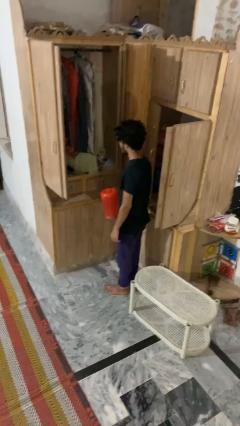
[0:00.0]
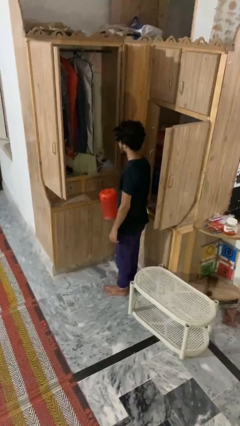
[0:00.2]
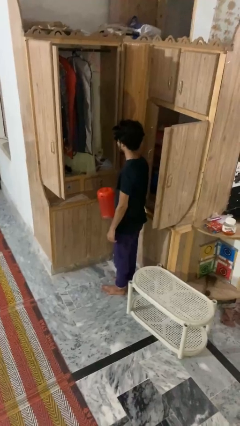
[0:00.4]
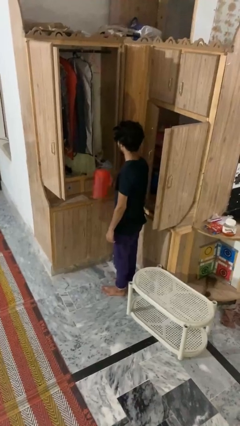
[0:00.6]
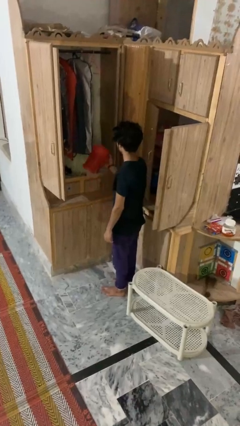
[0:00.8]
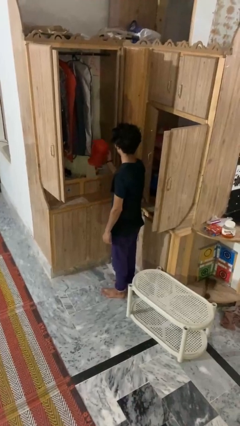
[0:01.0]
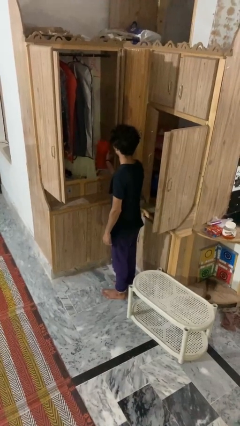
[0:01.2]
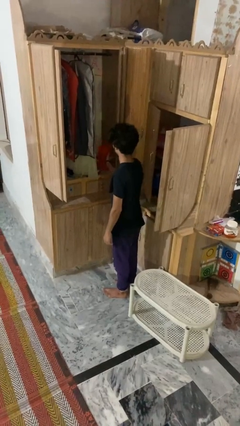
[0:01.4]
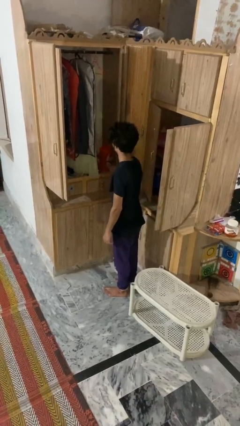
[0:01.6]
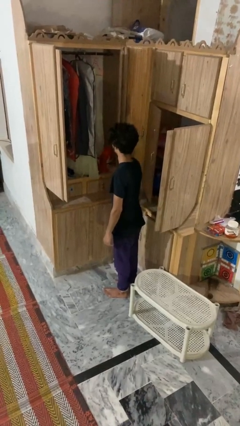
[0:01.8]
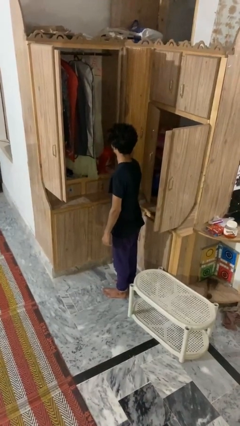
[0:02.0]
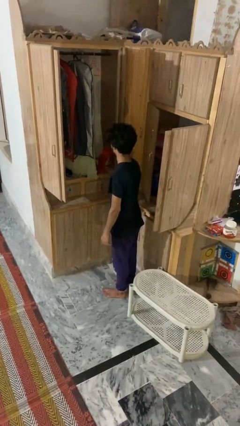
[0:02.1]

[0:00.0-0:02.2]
person puts down object into cabinet

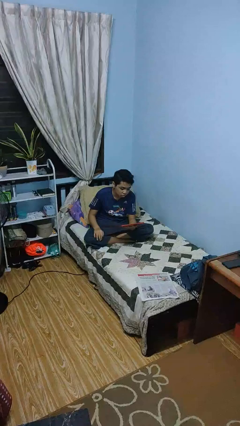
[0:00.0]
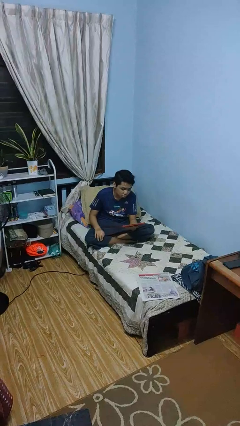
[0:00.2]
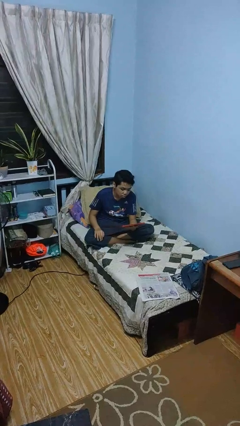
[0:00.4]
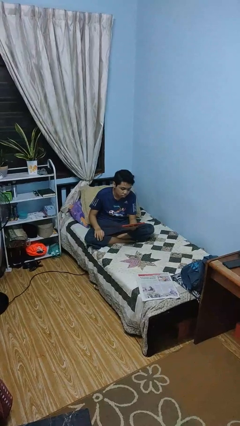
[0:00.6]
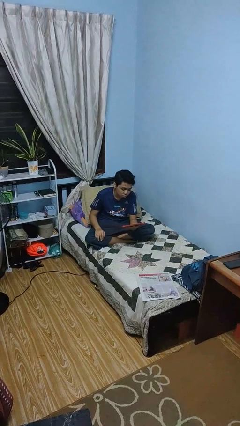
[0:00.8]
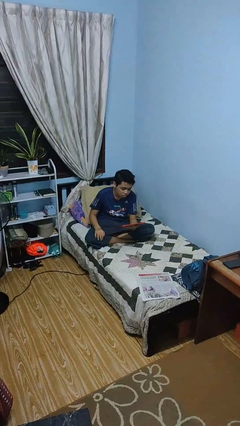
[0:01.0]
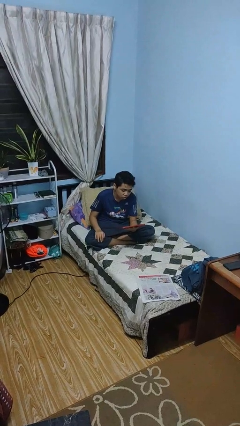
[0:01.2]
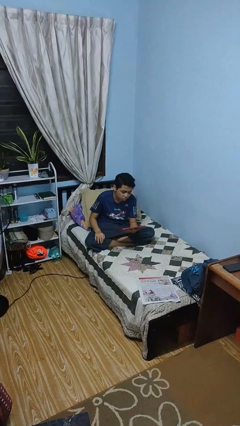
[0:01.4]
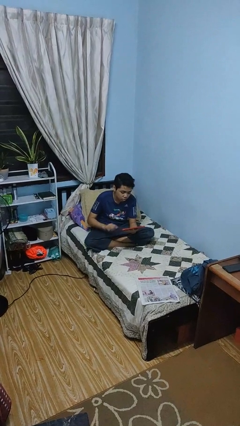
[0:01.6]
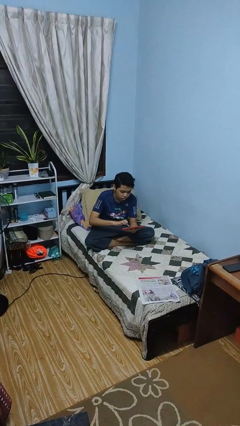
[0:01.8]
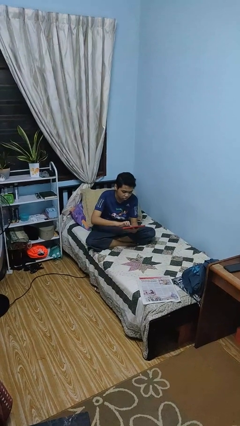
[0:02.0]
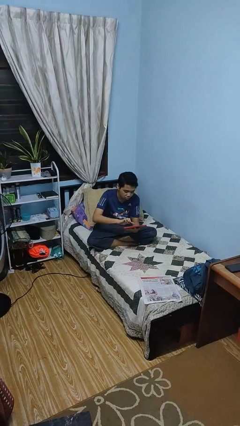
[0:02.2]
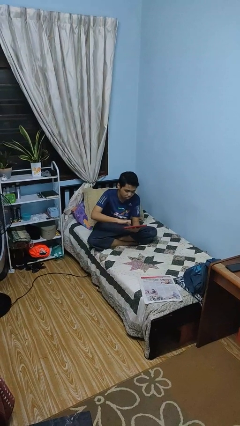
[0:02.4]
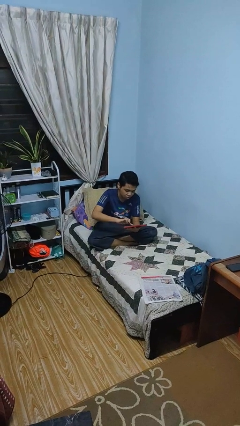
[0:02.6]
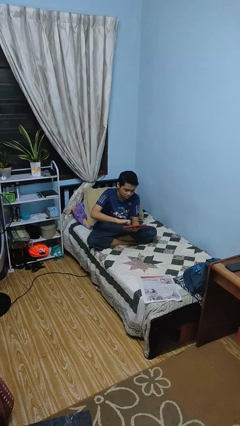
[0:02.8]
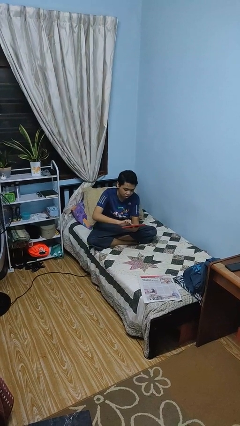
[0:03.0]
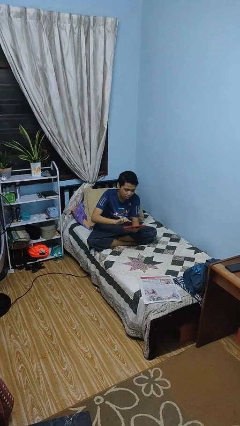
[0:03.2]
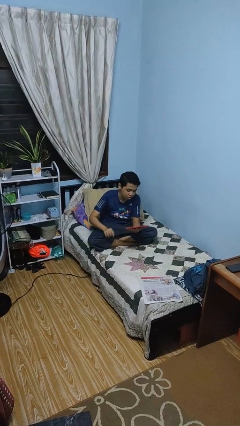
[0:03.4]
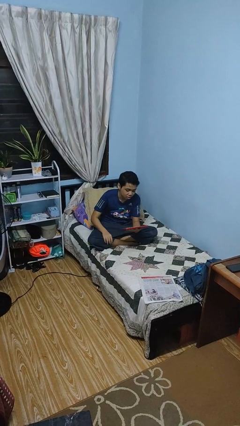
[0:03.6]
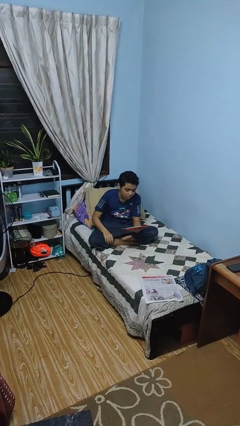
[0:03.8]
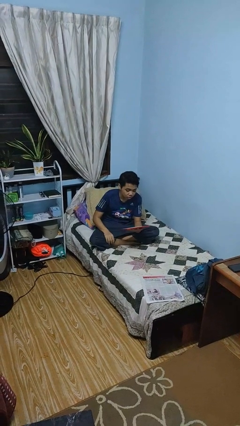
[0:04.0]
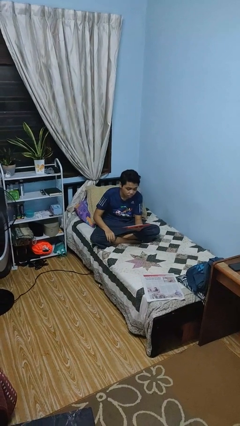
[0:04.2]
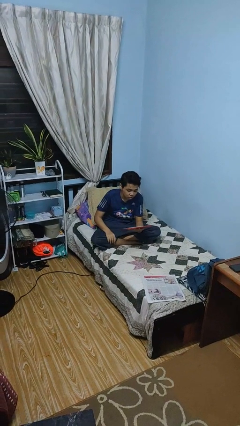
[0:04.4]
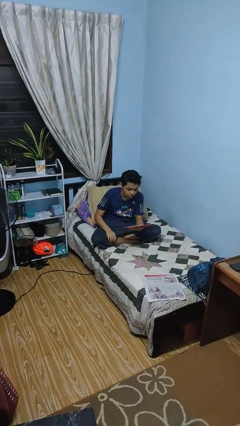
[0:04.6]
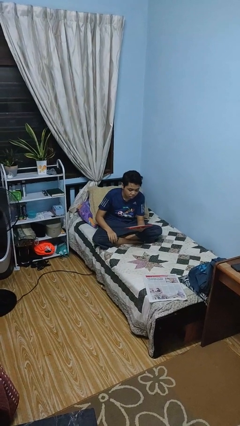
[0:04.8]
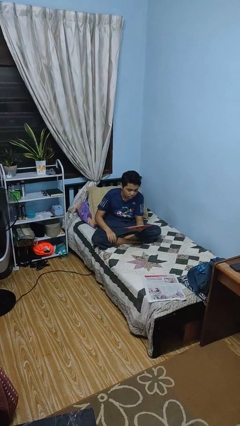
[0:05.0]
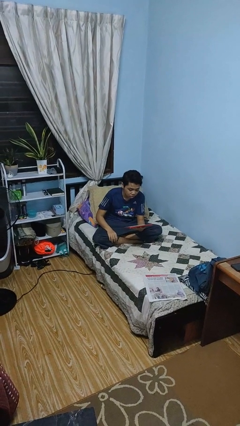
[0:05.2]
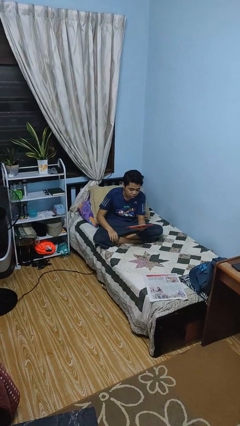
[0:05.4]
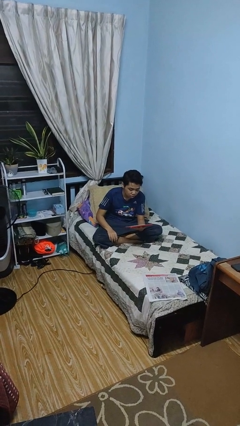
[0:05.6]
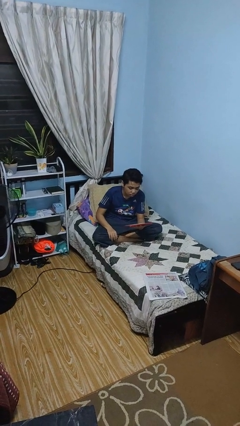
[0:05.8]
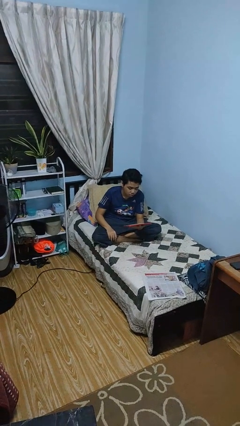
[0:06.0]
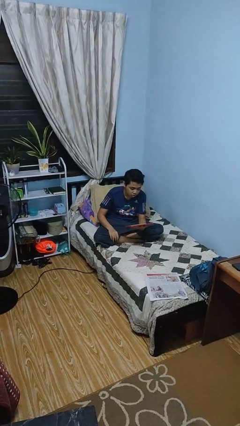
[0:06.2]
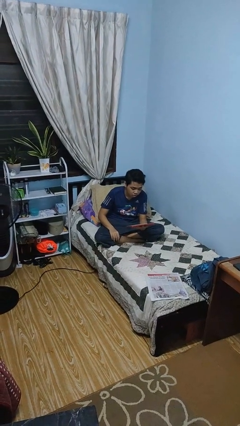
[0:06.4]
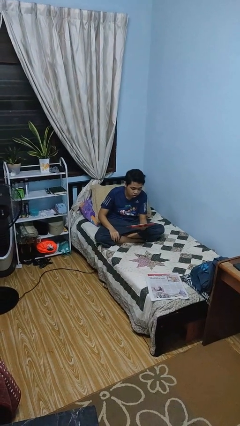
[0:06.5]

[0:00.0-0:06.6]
person interacts with tablet

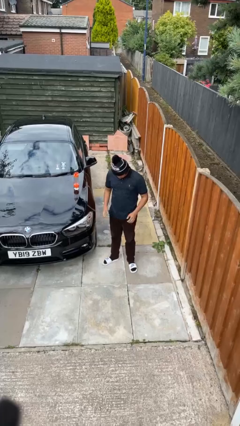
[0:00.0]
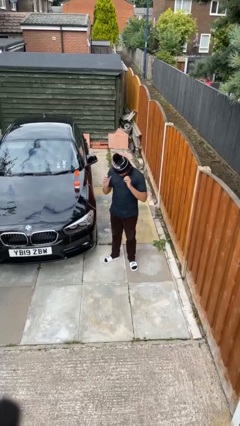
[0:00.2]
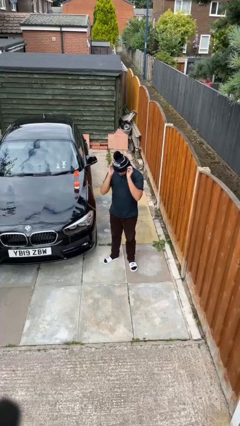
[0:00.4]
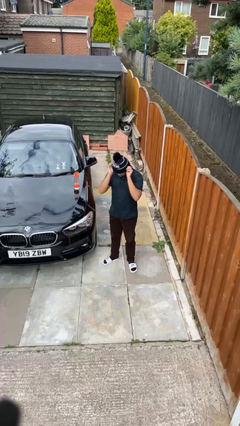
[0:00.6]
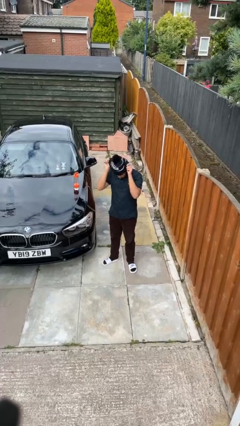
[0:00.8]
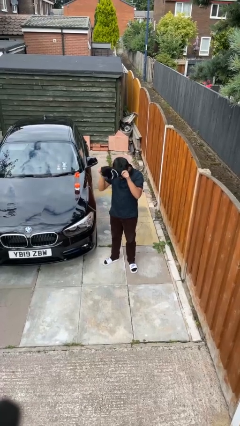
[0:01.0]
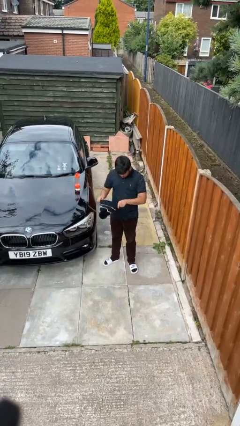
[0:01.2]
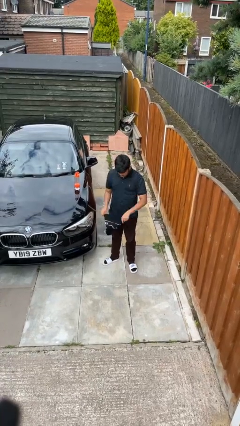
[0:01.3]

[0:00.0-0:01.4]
person takes off hat

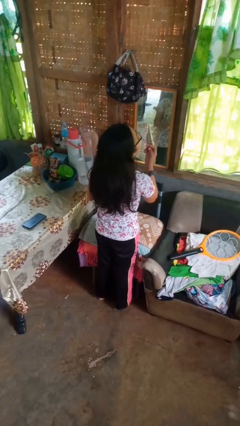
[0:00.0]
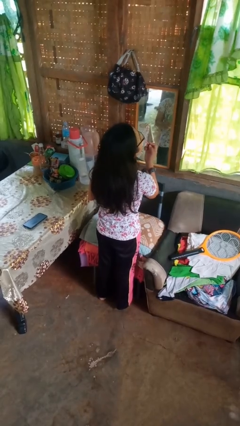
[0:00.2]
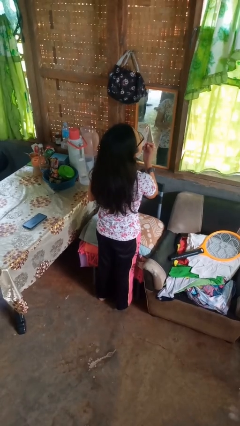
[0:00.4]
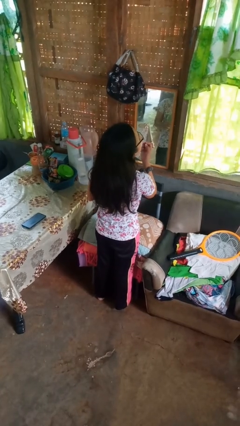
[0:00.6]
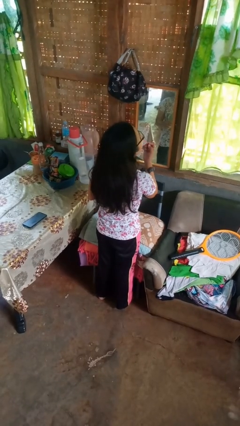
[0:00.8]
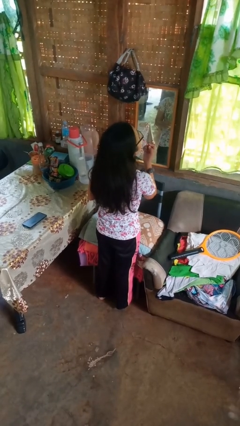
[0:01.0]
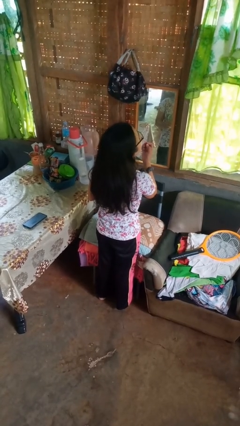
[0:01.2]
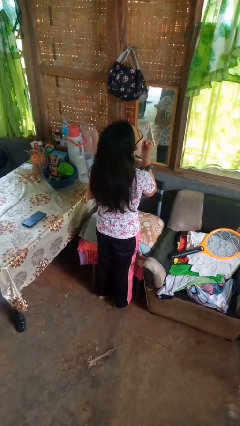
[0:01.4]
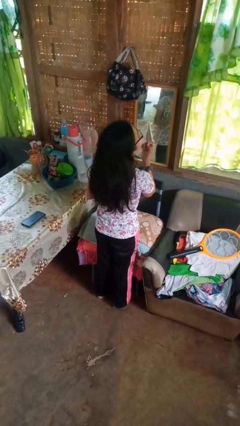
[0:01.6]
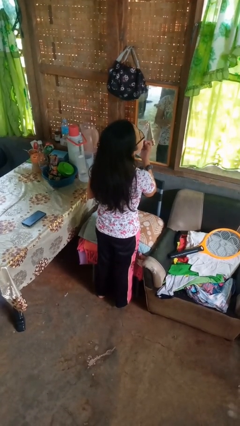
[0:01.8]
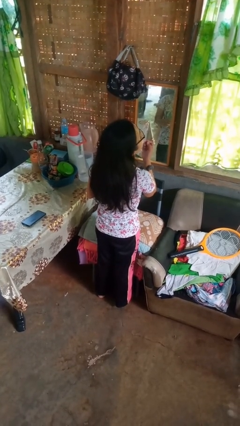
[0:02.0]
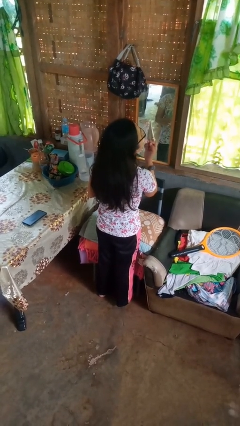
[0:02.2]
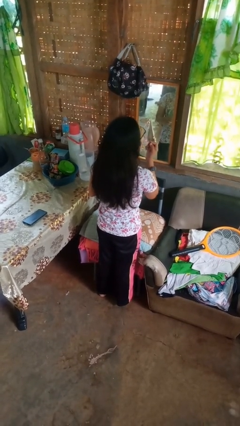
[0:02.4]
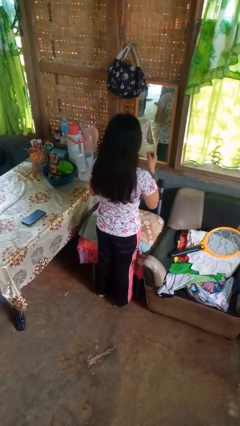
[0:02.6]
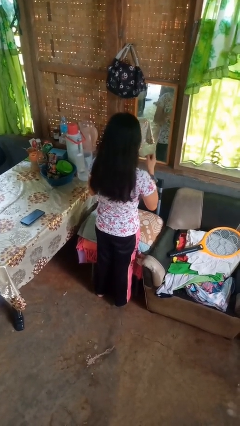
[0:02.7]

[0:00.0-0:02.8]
person applies lip makeup

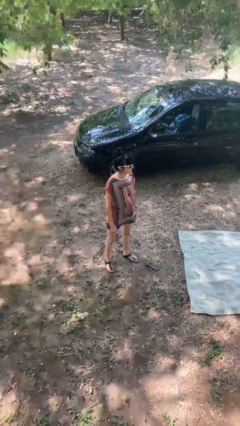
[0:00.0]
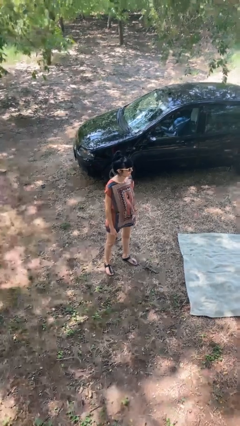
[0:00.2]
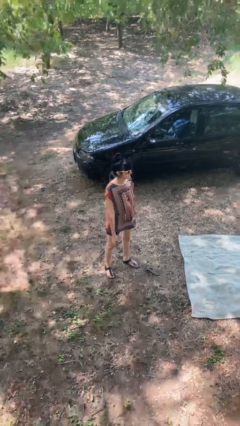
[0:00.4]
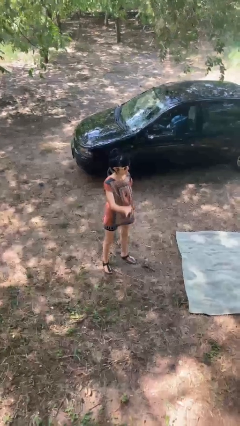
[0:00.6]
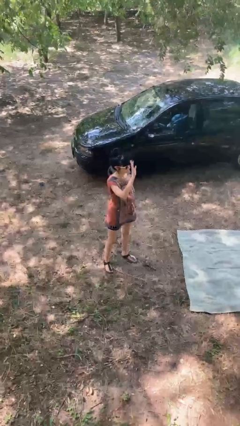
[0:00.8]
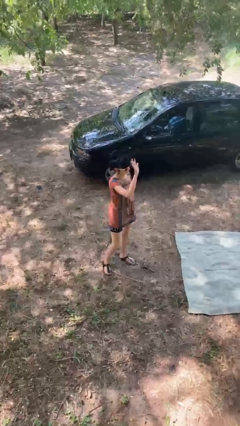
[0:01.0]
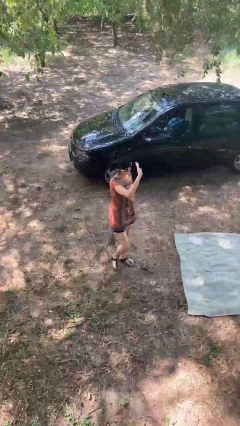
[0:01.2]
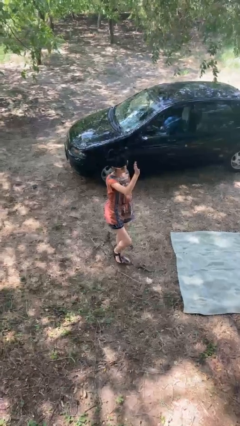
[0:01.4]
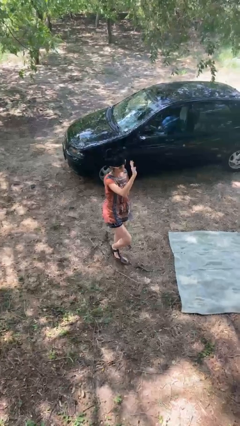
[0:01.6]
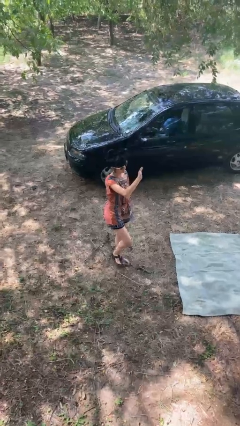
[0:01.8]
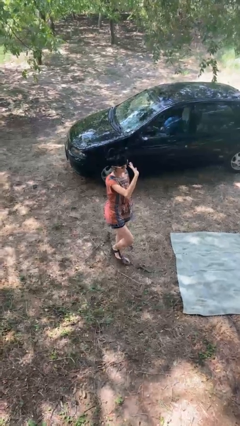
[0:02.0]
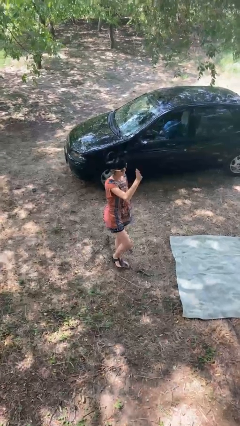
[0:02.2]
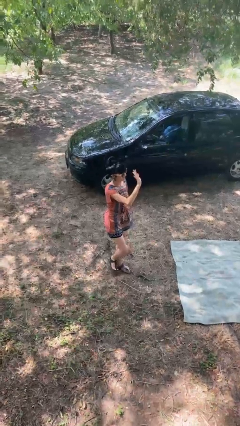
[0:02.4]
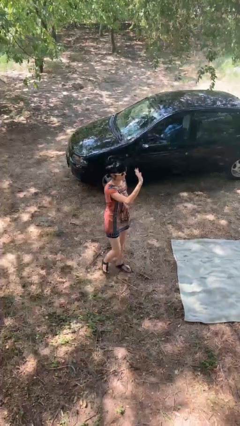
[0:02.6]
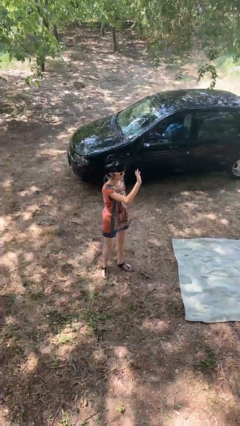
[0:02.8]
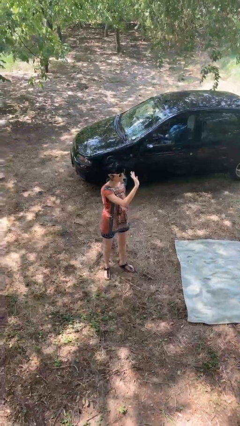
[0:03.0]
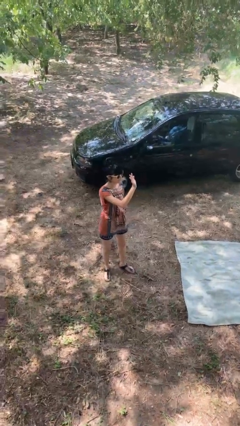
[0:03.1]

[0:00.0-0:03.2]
person waves at person

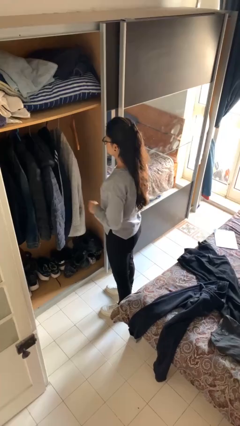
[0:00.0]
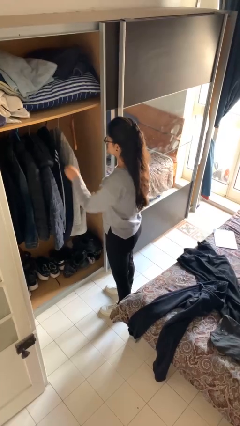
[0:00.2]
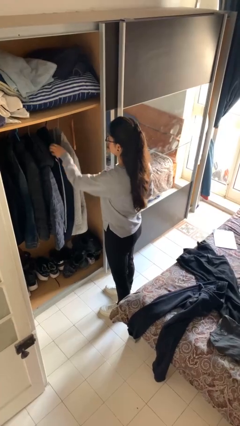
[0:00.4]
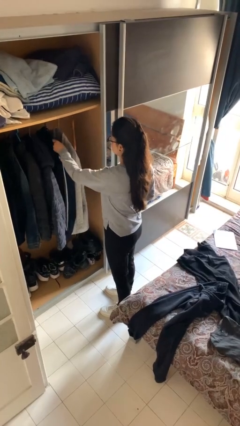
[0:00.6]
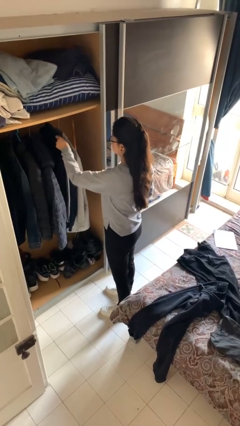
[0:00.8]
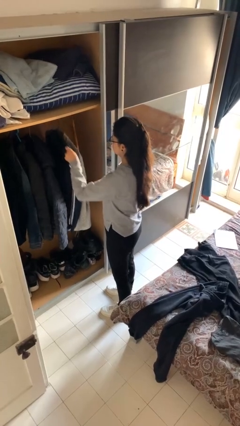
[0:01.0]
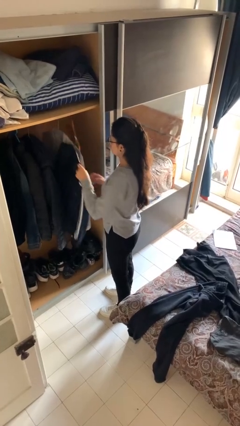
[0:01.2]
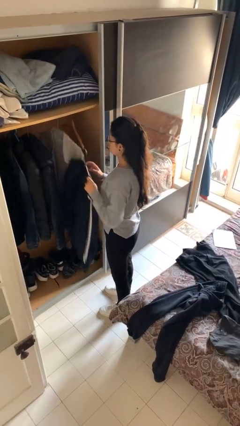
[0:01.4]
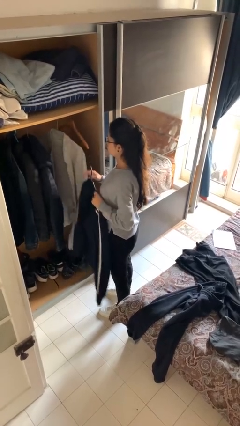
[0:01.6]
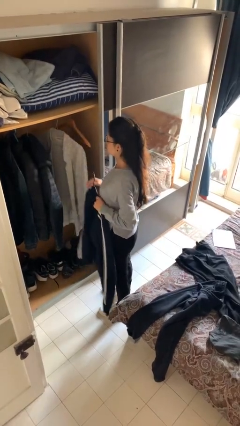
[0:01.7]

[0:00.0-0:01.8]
person takes clothes from closet
